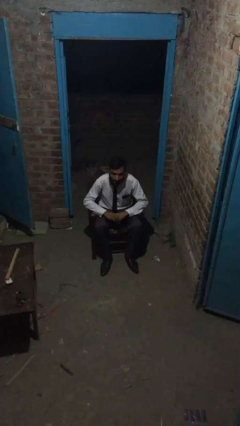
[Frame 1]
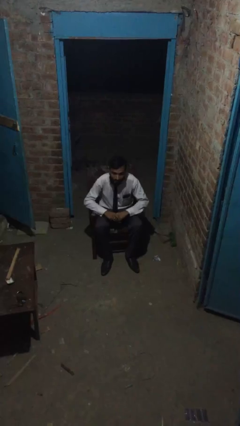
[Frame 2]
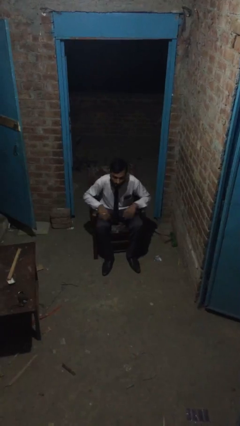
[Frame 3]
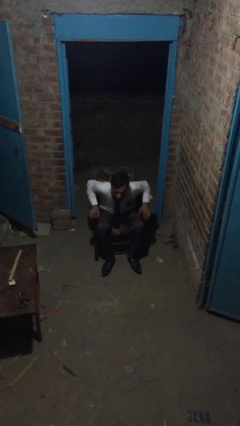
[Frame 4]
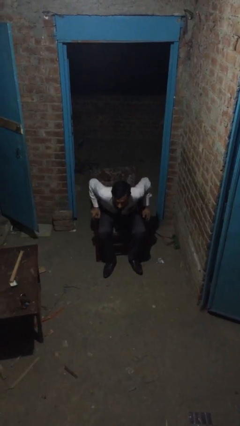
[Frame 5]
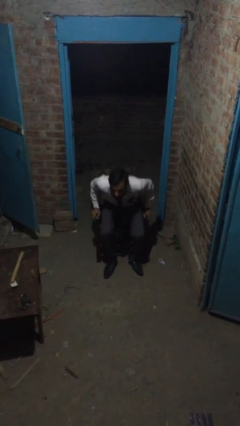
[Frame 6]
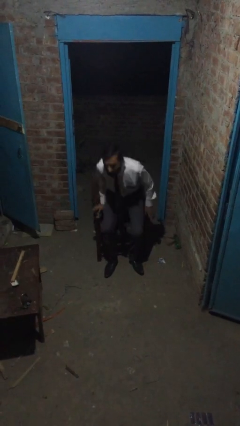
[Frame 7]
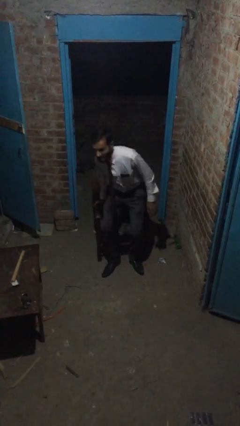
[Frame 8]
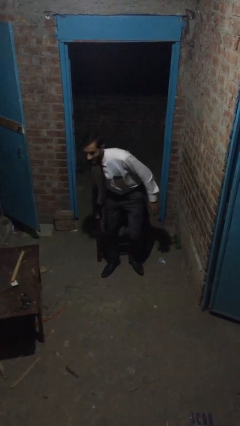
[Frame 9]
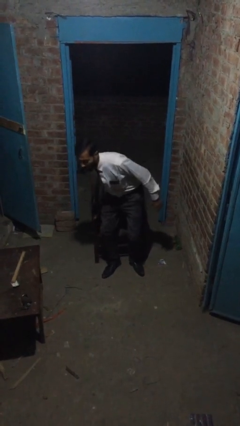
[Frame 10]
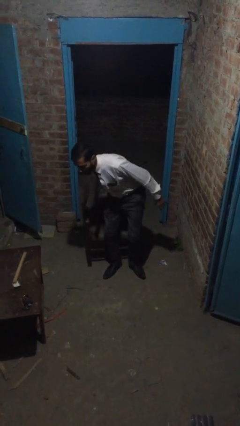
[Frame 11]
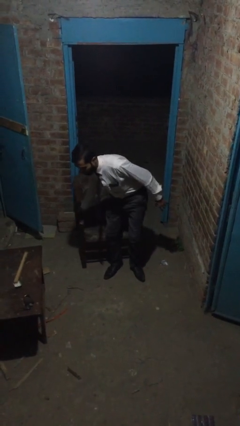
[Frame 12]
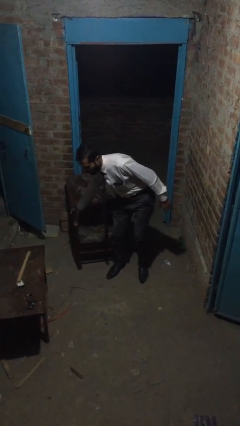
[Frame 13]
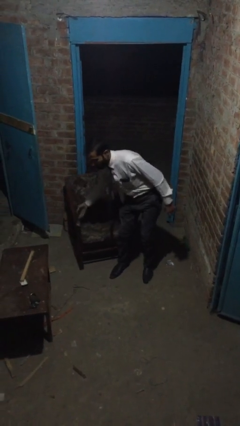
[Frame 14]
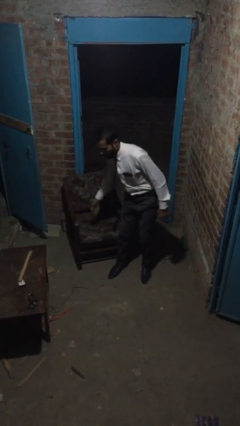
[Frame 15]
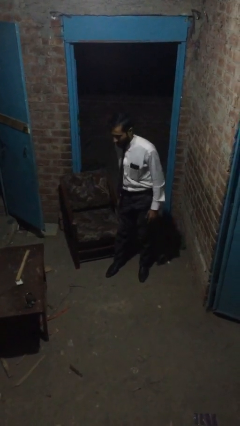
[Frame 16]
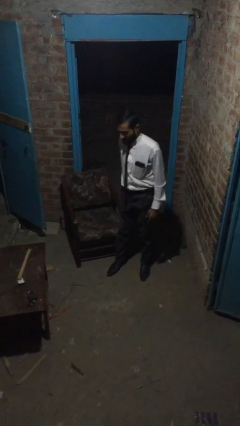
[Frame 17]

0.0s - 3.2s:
person stands up

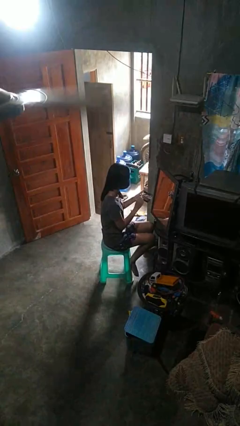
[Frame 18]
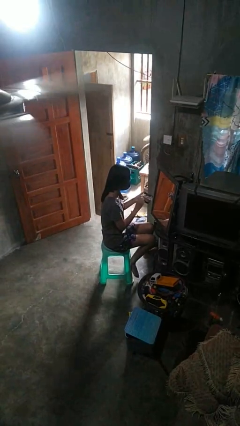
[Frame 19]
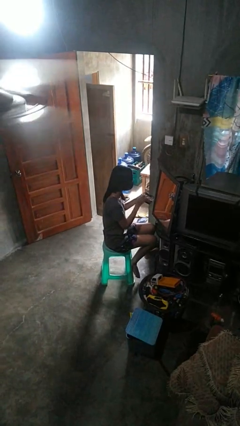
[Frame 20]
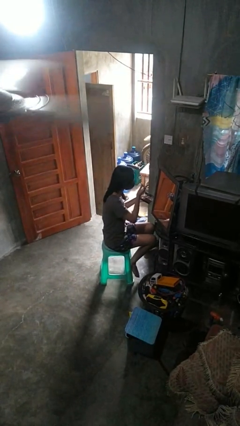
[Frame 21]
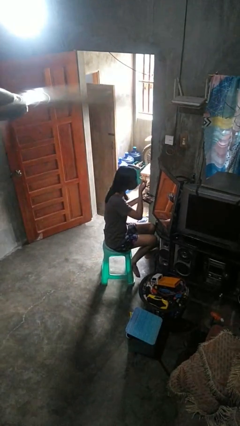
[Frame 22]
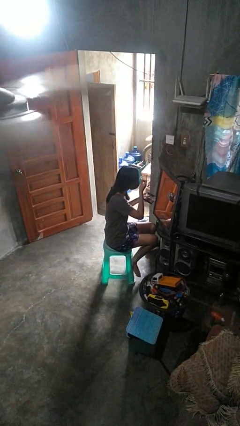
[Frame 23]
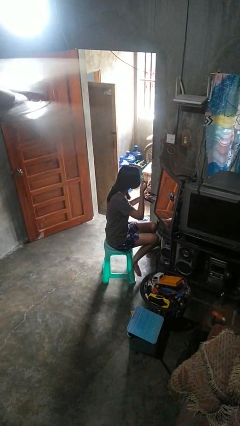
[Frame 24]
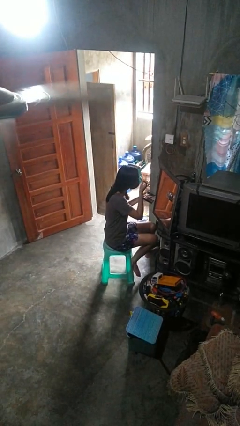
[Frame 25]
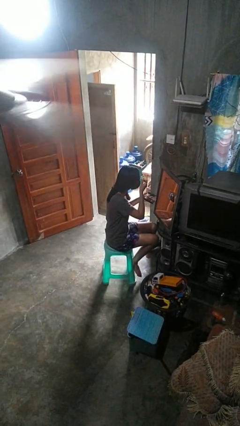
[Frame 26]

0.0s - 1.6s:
person applies eye makeup

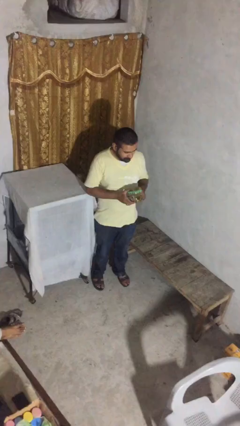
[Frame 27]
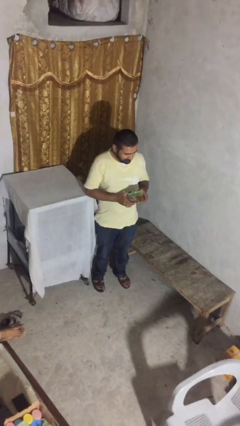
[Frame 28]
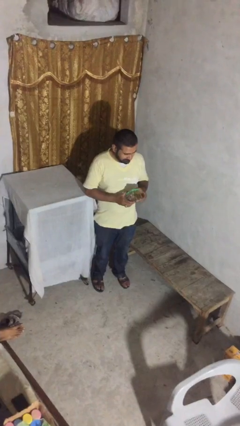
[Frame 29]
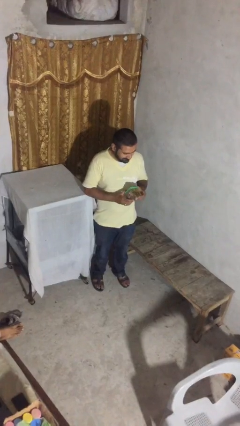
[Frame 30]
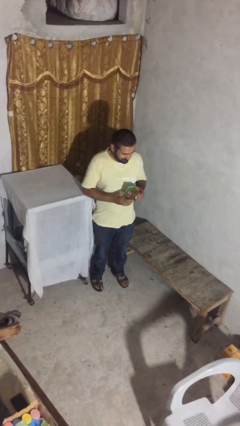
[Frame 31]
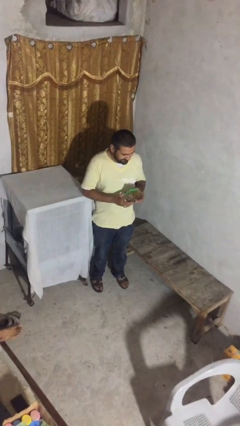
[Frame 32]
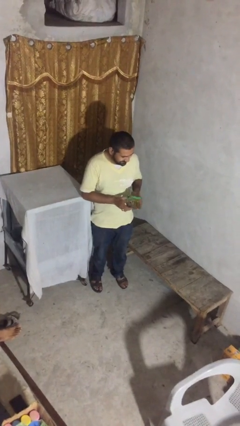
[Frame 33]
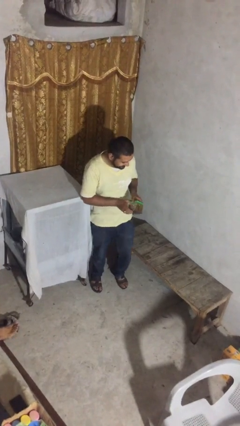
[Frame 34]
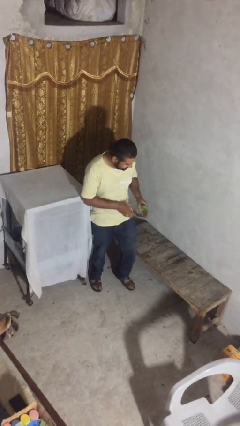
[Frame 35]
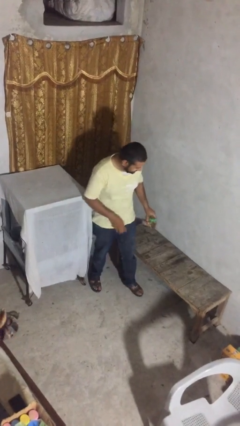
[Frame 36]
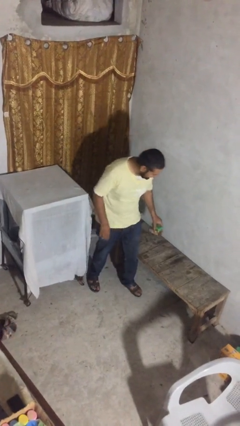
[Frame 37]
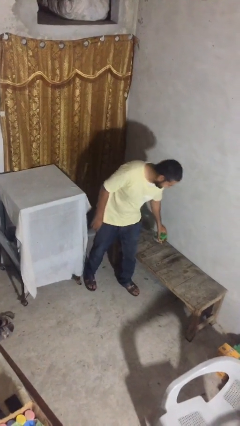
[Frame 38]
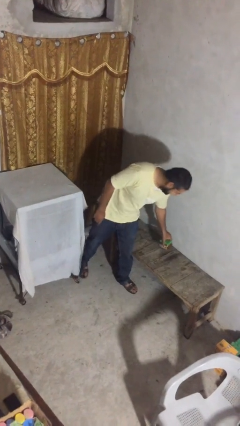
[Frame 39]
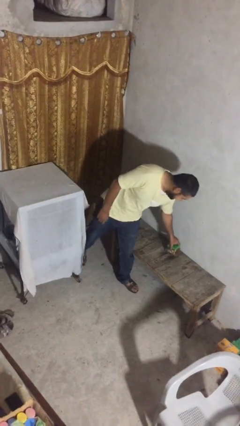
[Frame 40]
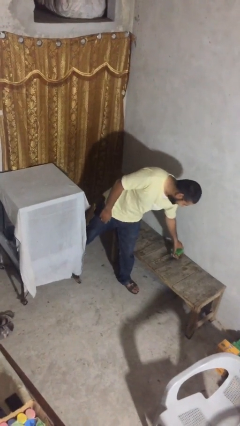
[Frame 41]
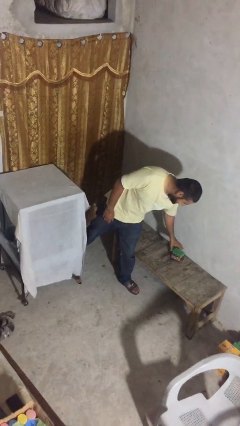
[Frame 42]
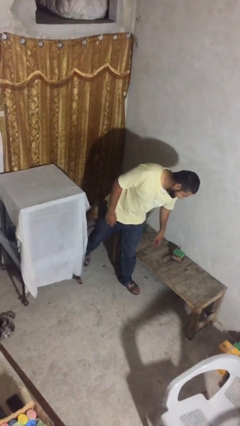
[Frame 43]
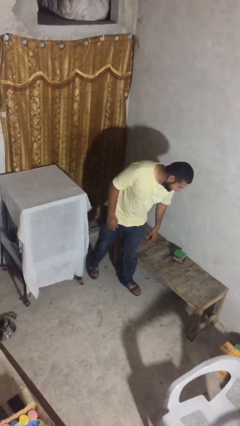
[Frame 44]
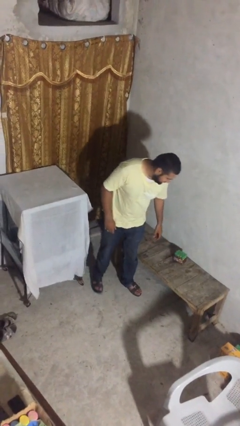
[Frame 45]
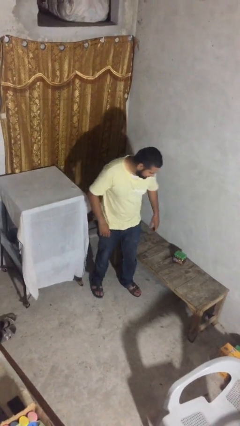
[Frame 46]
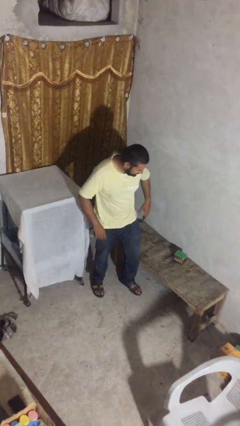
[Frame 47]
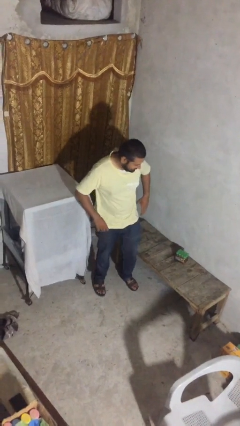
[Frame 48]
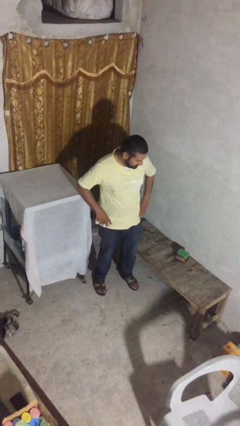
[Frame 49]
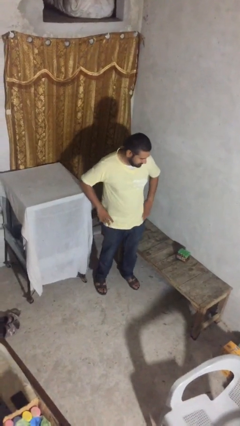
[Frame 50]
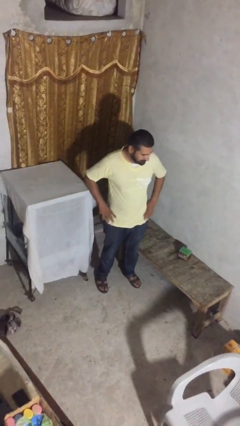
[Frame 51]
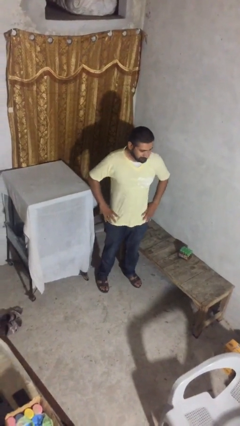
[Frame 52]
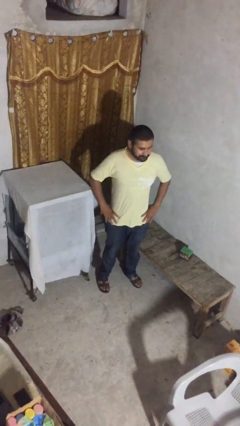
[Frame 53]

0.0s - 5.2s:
person puts down object on table

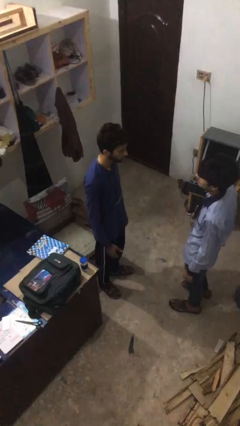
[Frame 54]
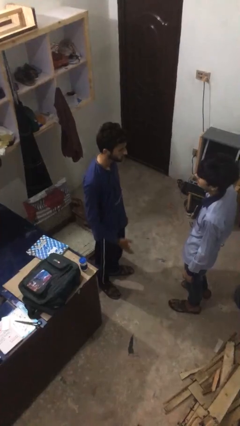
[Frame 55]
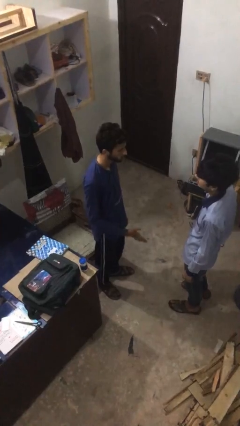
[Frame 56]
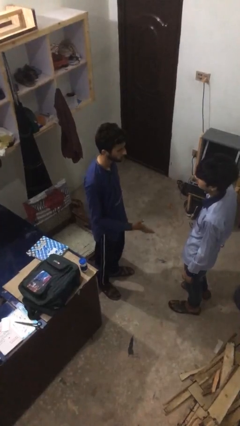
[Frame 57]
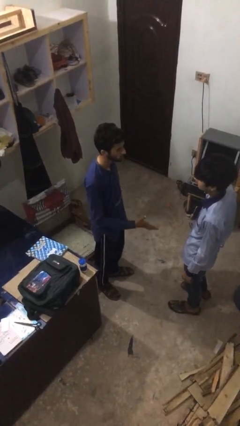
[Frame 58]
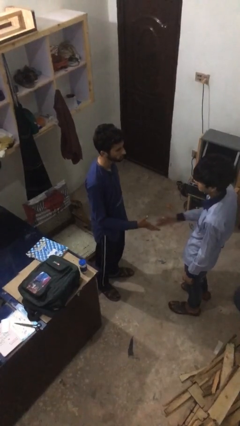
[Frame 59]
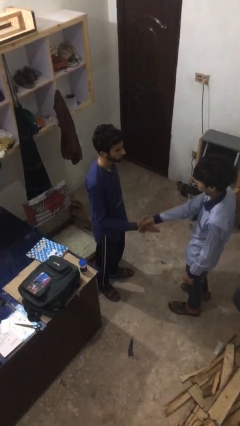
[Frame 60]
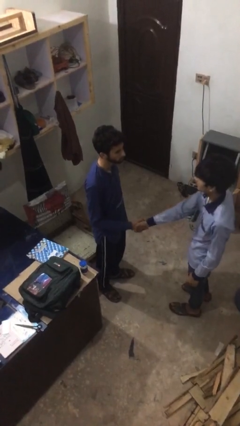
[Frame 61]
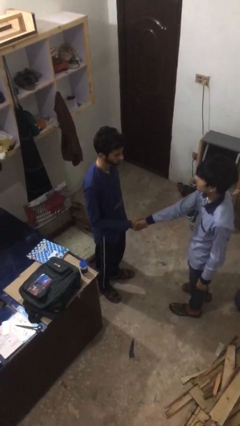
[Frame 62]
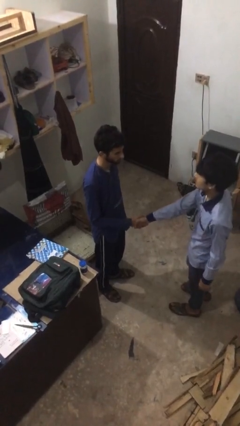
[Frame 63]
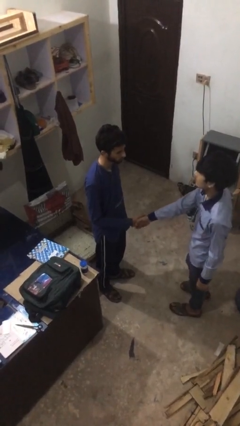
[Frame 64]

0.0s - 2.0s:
person shakes hand

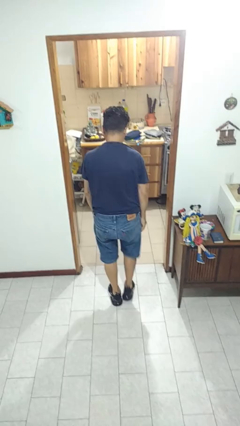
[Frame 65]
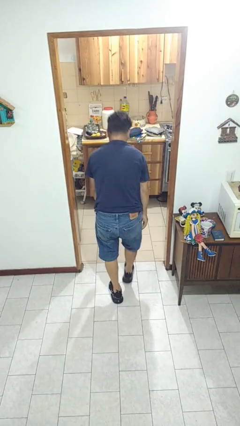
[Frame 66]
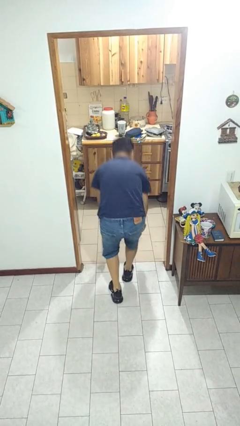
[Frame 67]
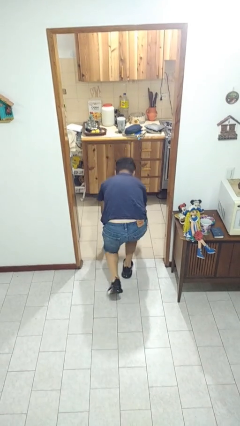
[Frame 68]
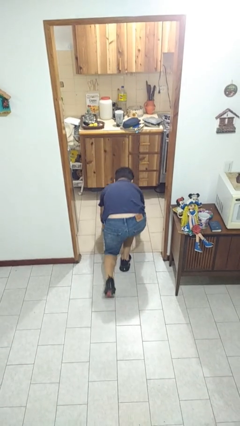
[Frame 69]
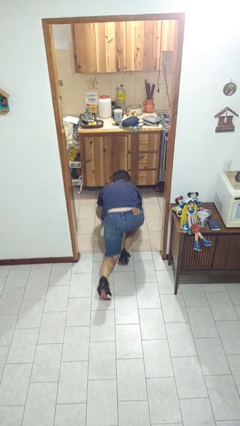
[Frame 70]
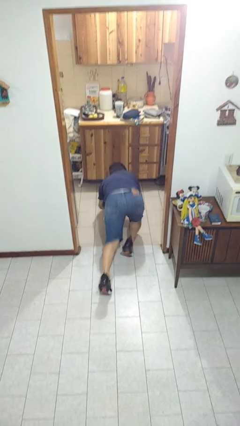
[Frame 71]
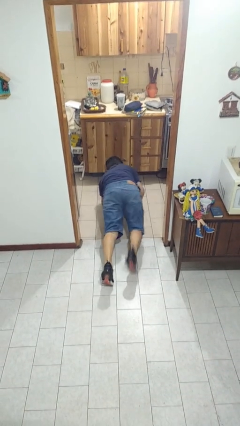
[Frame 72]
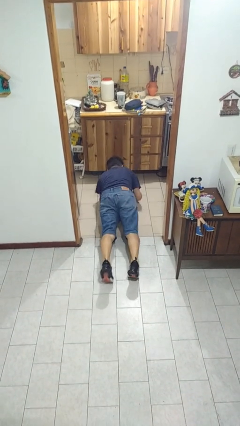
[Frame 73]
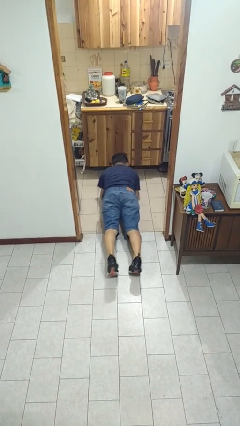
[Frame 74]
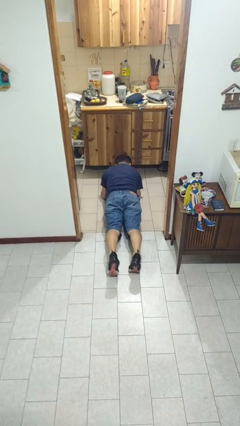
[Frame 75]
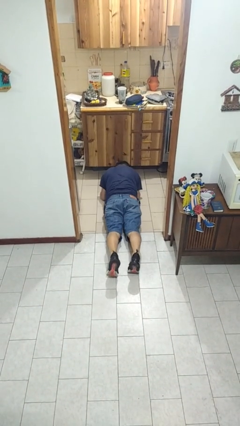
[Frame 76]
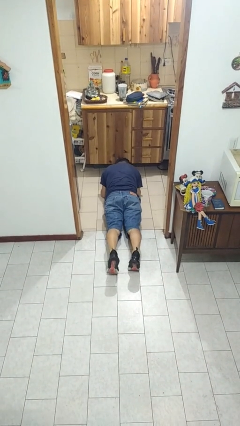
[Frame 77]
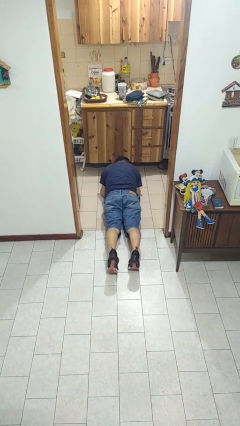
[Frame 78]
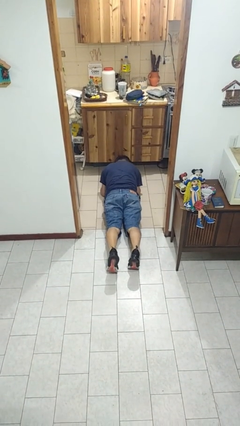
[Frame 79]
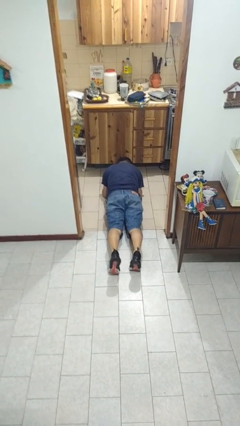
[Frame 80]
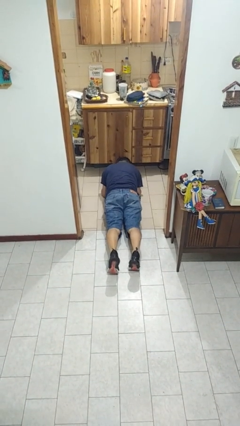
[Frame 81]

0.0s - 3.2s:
person exercises with plank

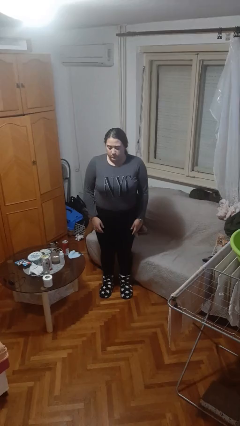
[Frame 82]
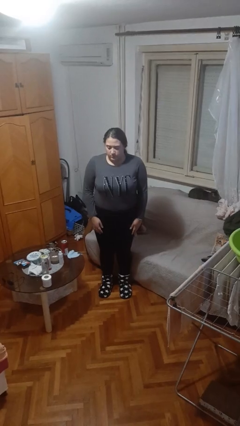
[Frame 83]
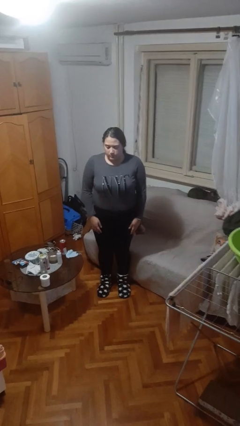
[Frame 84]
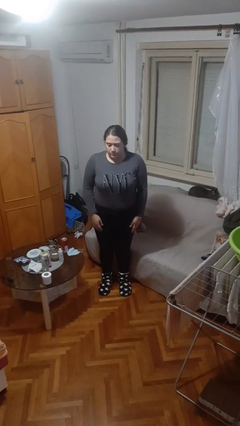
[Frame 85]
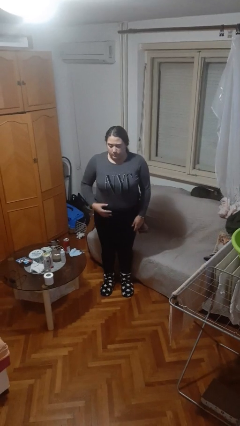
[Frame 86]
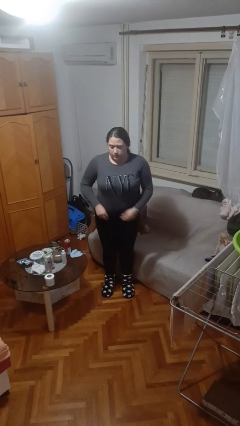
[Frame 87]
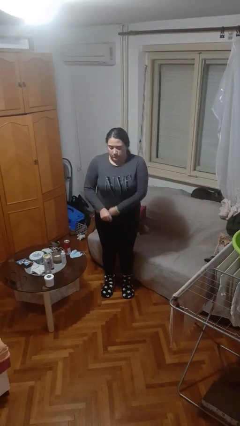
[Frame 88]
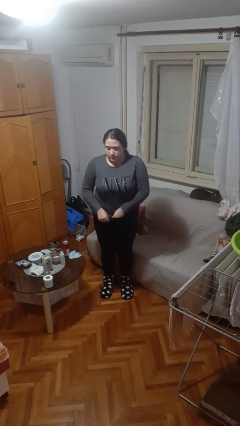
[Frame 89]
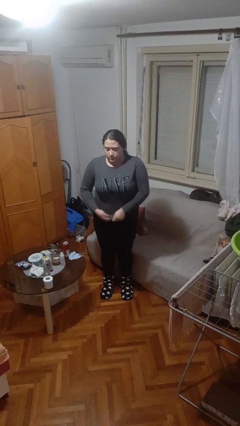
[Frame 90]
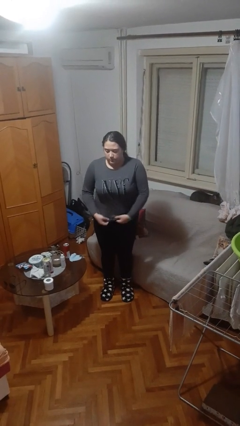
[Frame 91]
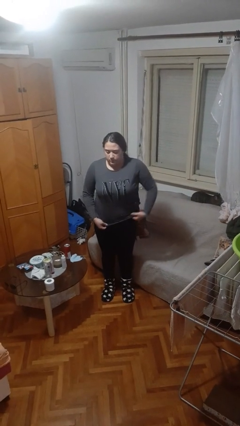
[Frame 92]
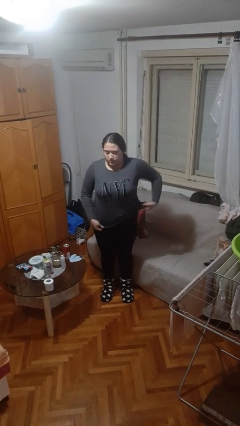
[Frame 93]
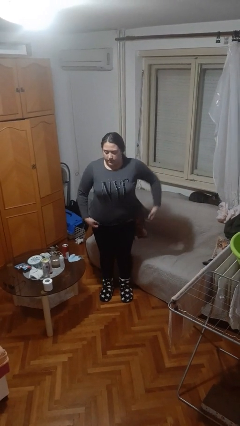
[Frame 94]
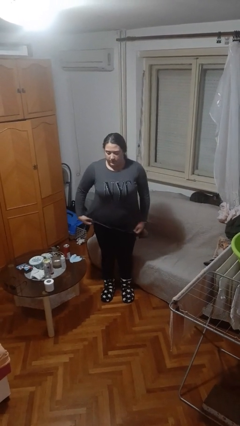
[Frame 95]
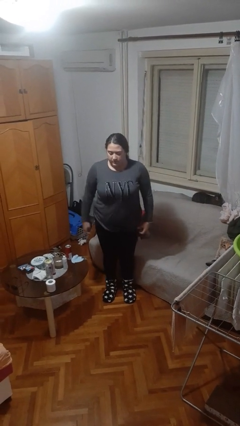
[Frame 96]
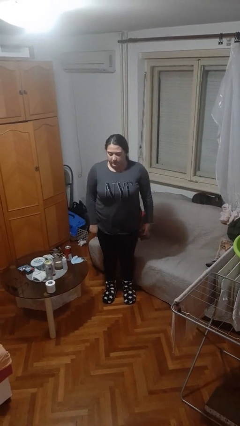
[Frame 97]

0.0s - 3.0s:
person untucks shirt
